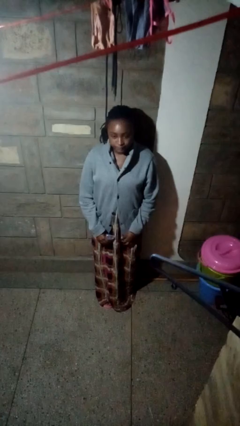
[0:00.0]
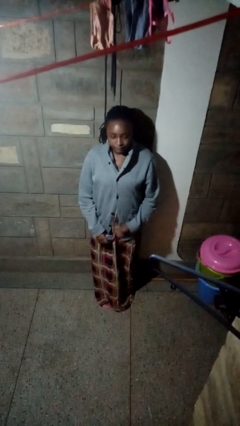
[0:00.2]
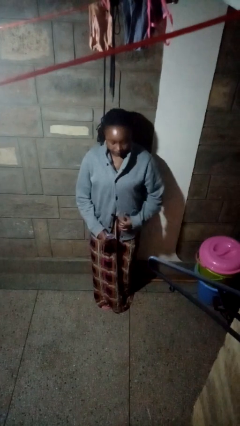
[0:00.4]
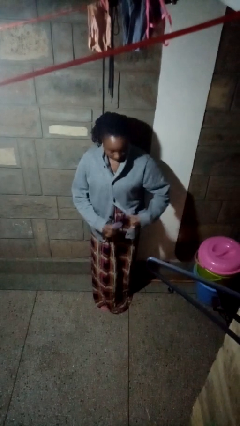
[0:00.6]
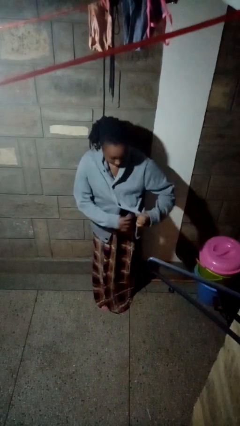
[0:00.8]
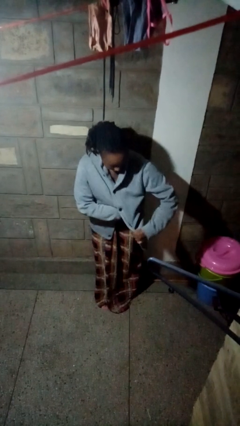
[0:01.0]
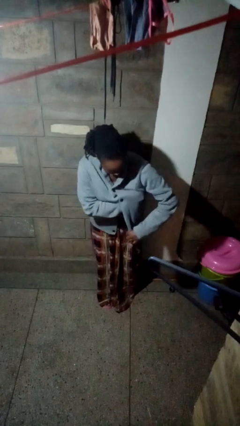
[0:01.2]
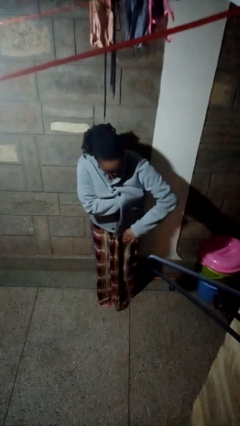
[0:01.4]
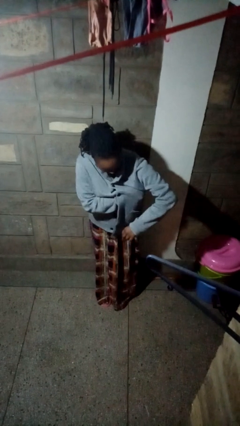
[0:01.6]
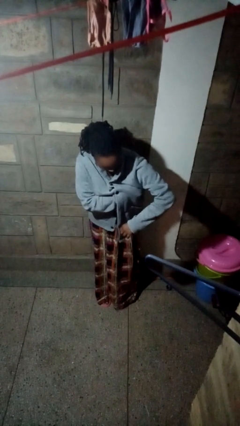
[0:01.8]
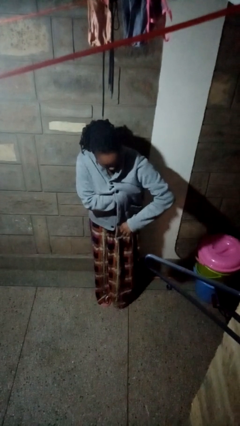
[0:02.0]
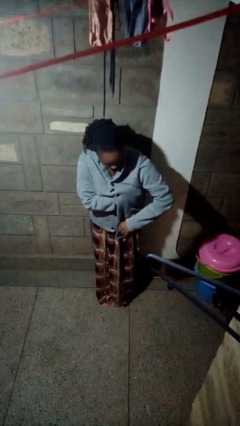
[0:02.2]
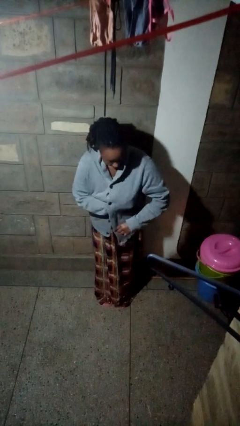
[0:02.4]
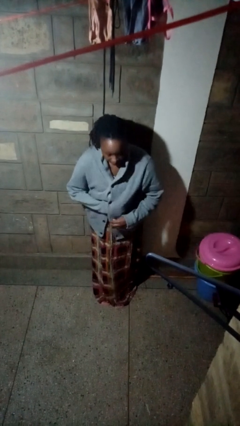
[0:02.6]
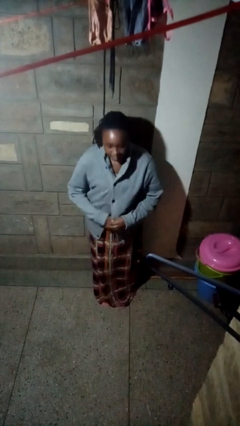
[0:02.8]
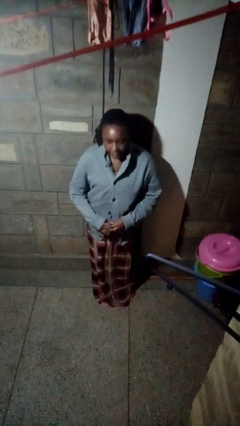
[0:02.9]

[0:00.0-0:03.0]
person applies deodorant

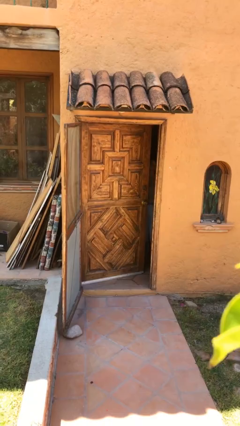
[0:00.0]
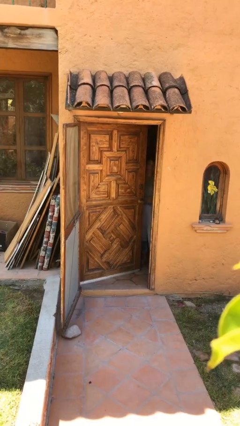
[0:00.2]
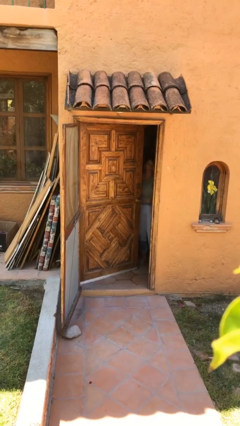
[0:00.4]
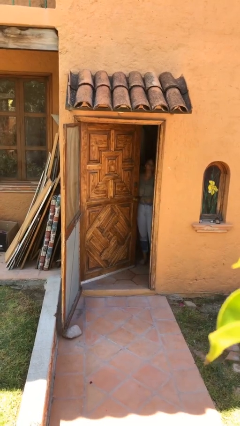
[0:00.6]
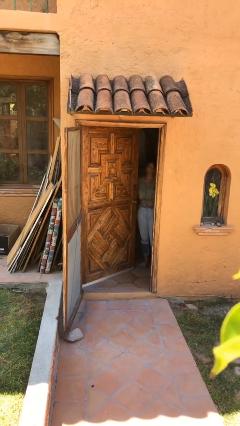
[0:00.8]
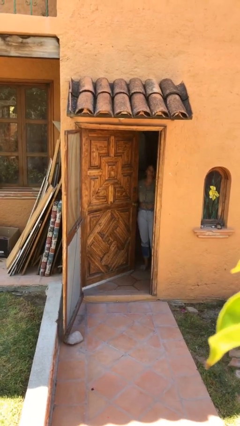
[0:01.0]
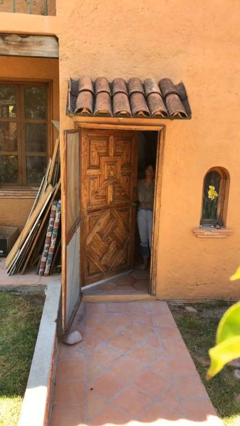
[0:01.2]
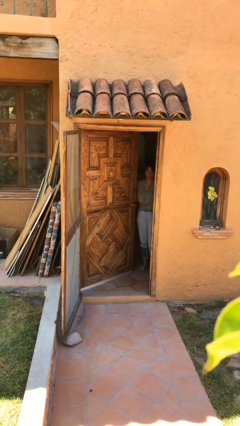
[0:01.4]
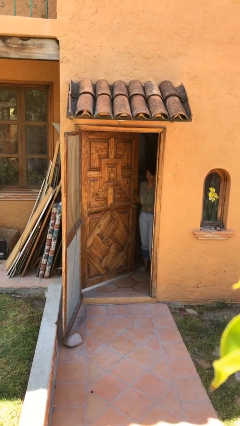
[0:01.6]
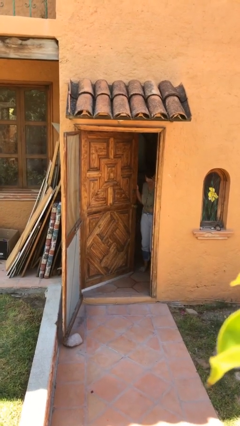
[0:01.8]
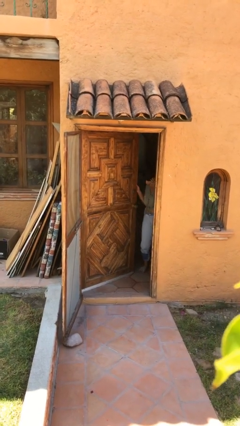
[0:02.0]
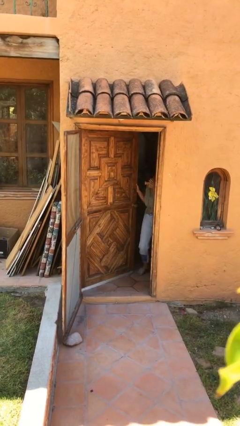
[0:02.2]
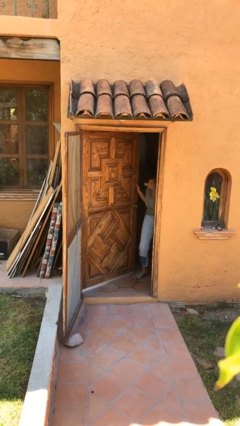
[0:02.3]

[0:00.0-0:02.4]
person opens facility door

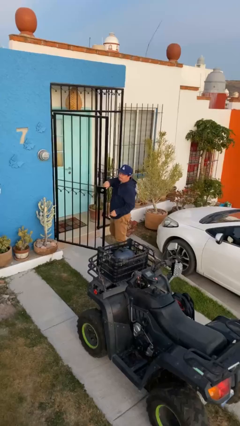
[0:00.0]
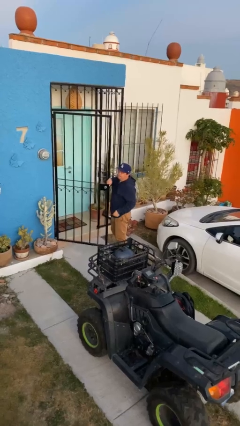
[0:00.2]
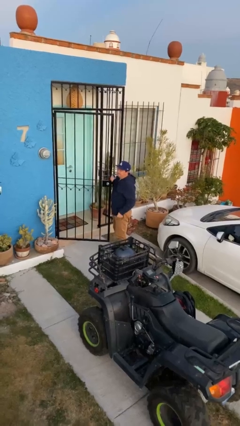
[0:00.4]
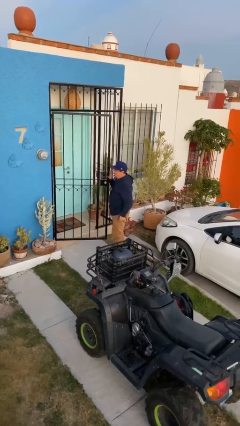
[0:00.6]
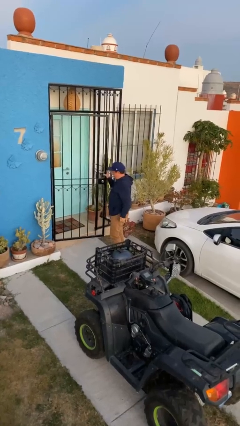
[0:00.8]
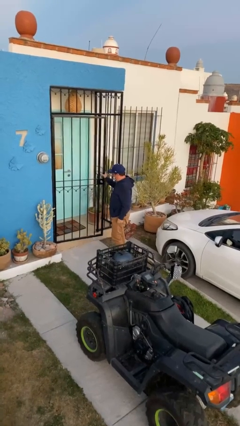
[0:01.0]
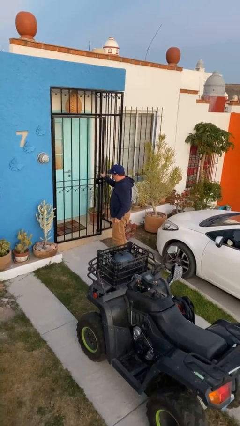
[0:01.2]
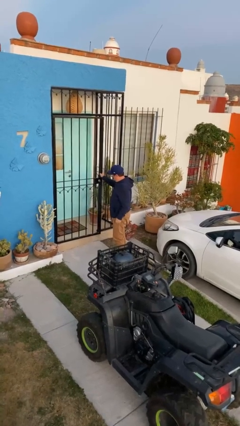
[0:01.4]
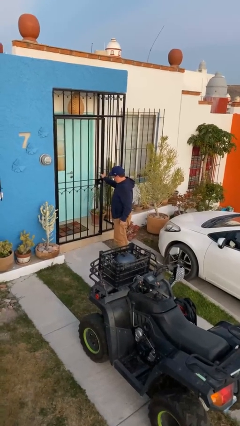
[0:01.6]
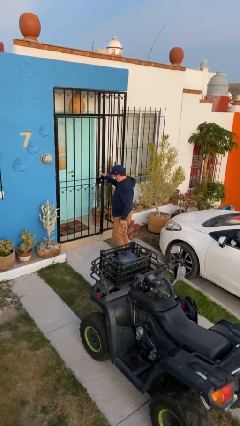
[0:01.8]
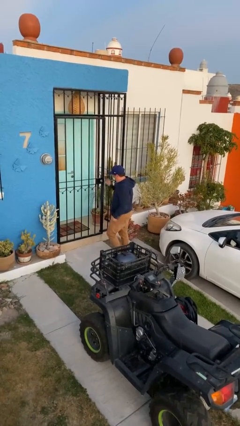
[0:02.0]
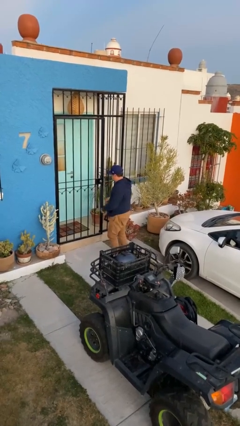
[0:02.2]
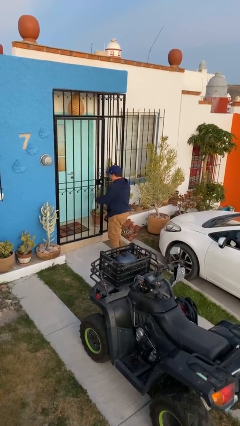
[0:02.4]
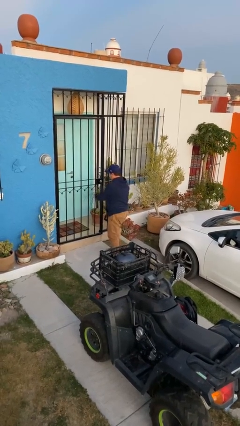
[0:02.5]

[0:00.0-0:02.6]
person closes facility door

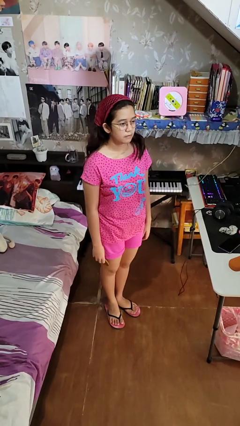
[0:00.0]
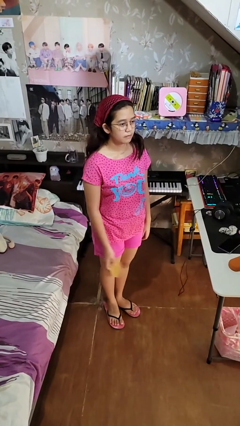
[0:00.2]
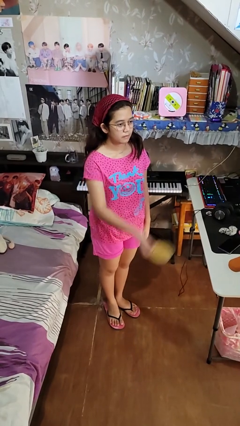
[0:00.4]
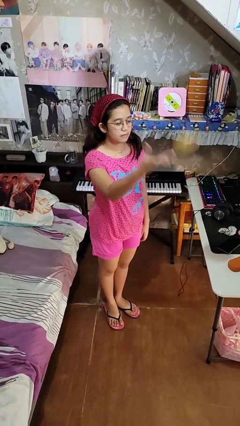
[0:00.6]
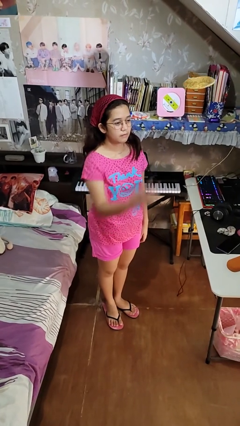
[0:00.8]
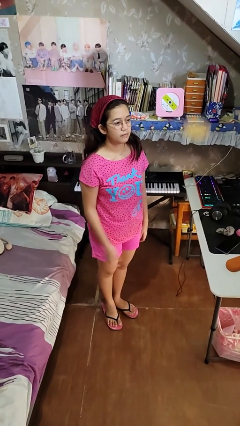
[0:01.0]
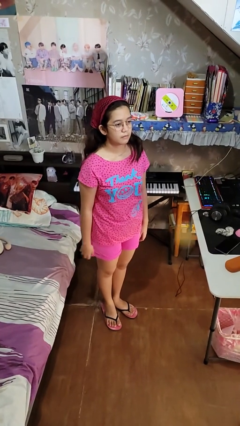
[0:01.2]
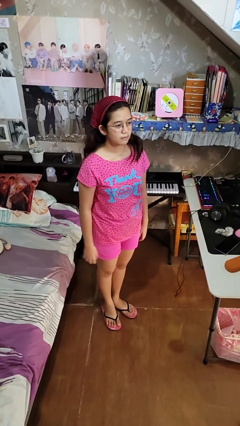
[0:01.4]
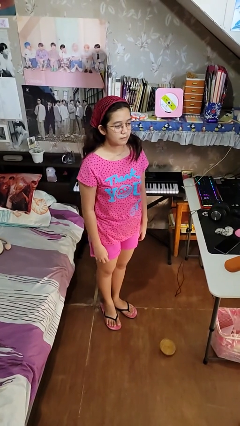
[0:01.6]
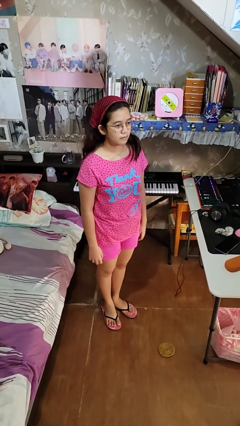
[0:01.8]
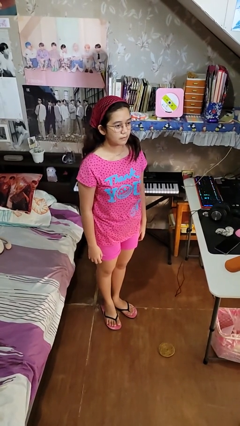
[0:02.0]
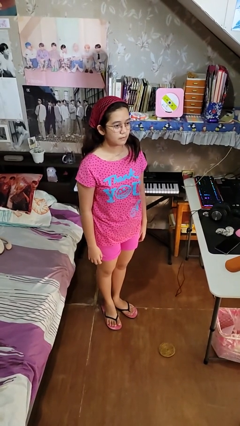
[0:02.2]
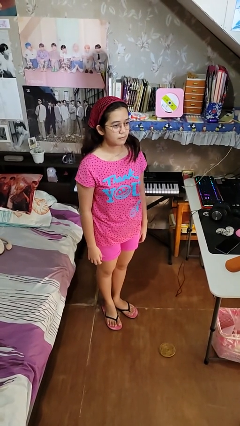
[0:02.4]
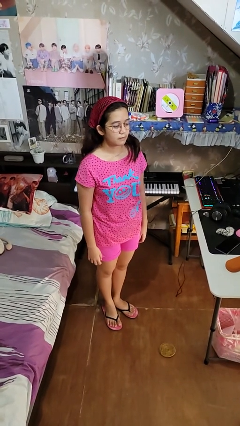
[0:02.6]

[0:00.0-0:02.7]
person throws object into air

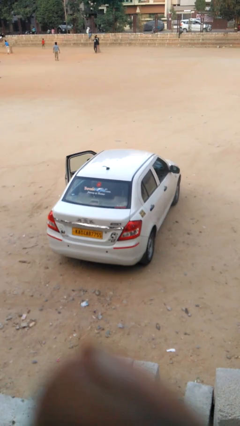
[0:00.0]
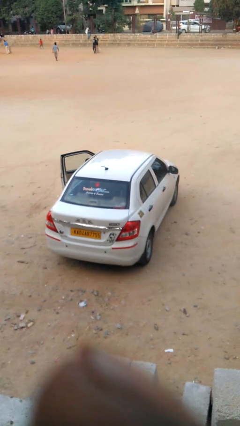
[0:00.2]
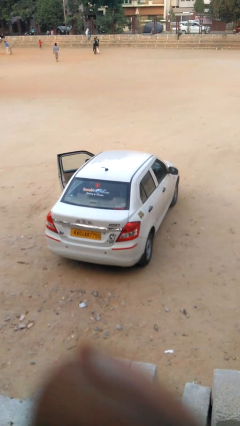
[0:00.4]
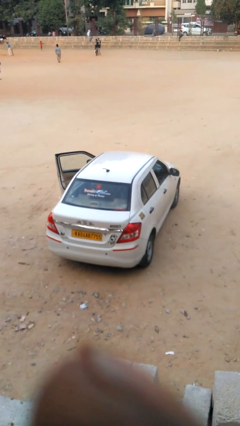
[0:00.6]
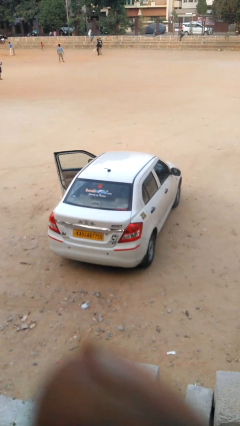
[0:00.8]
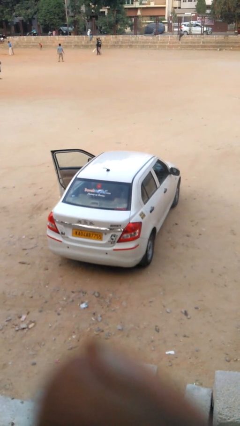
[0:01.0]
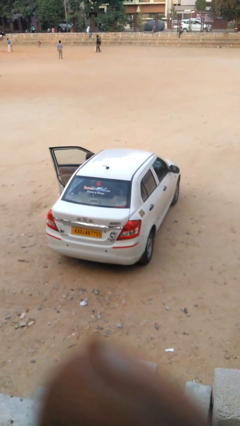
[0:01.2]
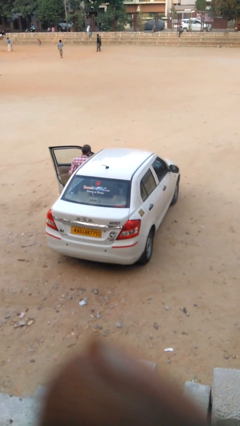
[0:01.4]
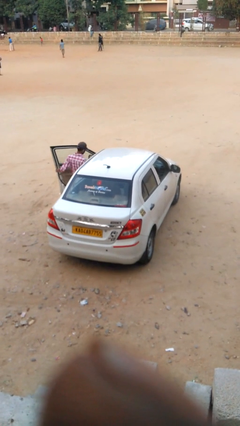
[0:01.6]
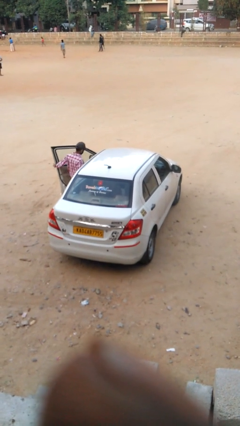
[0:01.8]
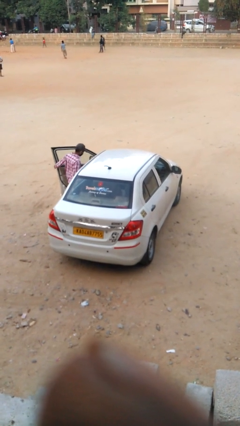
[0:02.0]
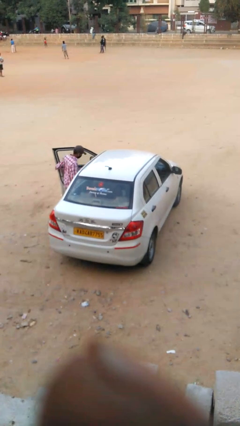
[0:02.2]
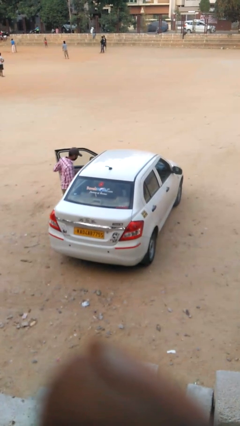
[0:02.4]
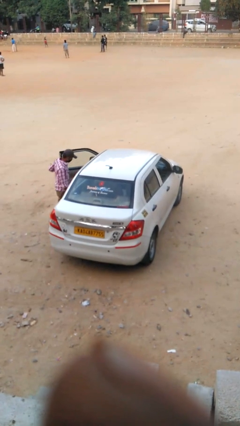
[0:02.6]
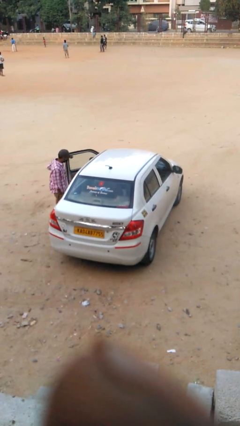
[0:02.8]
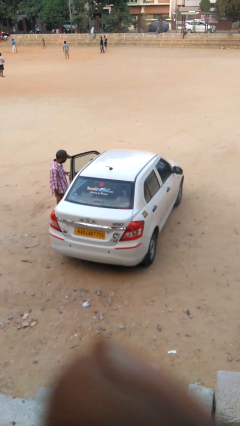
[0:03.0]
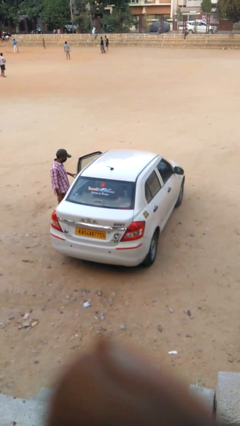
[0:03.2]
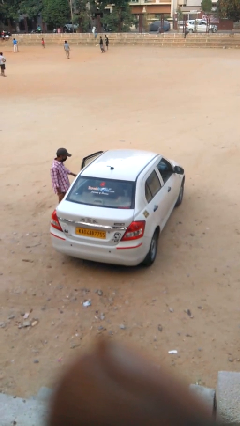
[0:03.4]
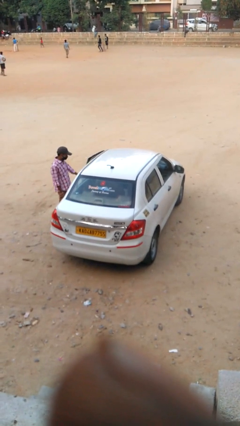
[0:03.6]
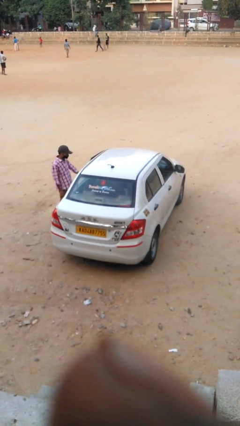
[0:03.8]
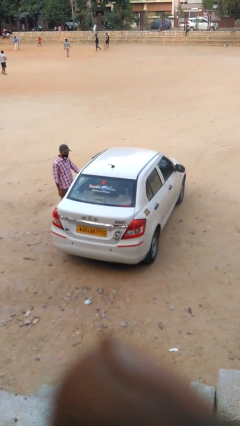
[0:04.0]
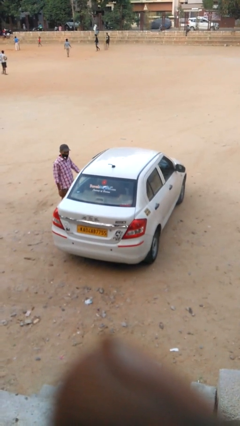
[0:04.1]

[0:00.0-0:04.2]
car drops off person

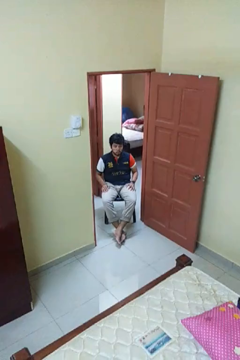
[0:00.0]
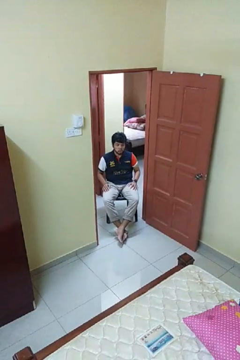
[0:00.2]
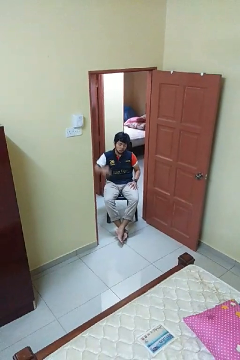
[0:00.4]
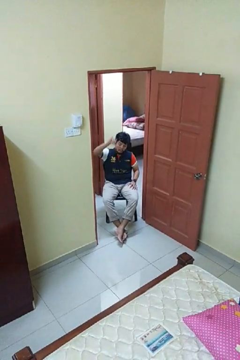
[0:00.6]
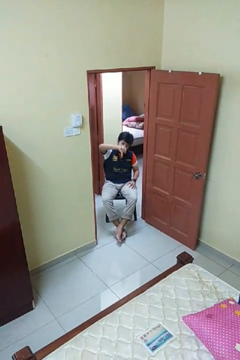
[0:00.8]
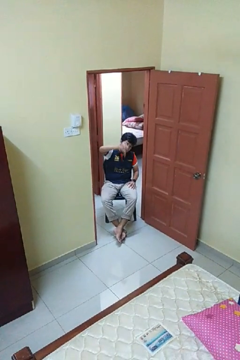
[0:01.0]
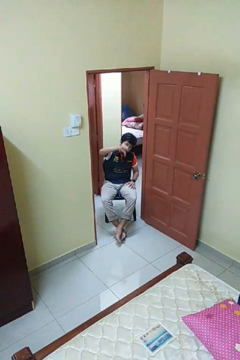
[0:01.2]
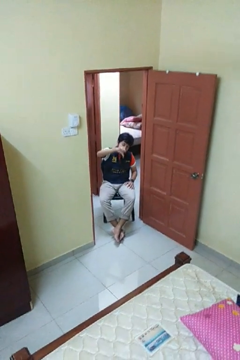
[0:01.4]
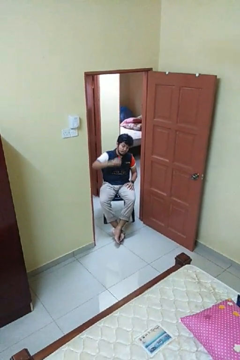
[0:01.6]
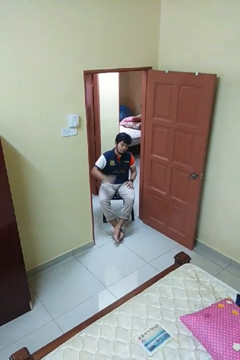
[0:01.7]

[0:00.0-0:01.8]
person gestures thumbs down

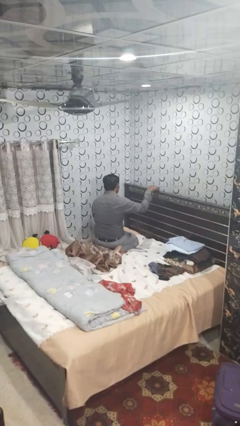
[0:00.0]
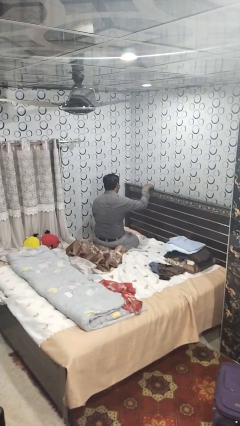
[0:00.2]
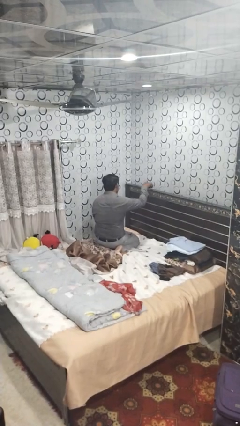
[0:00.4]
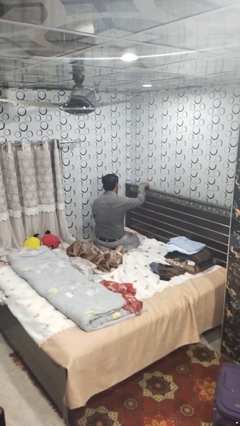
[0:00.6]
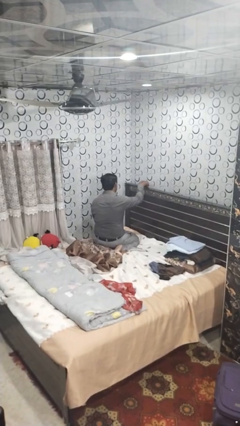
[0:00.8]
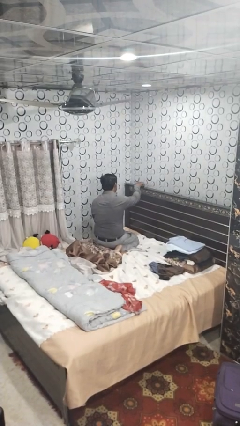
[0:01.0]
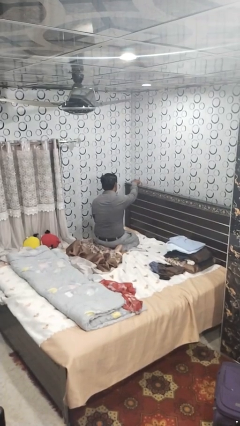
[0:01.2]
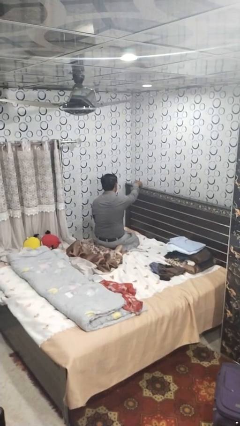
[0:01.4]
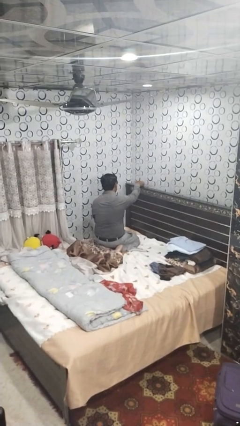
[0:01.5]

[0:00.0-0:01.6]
person dusts furniture
